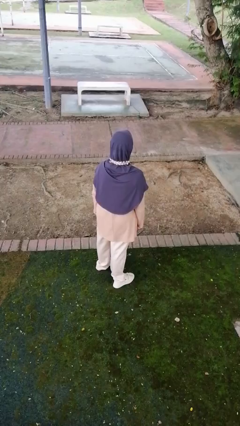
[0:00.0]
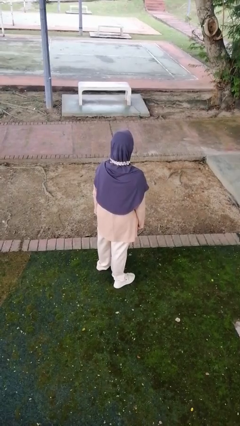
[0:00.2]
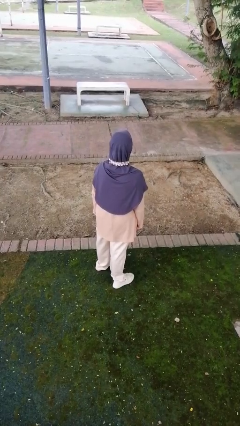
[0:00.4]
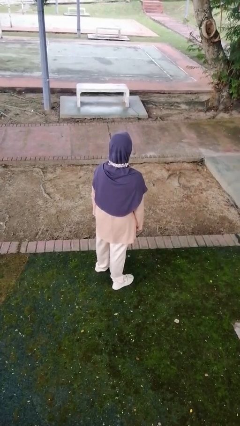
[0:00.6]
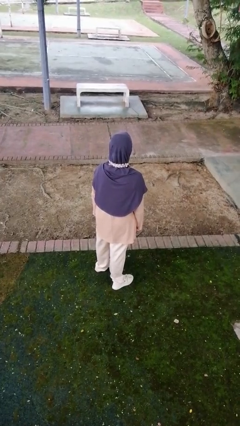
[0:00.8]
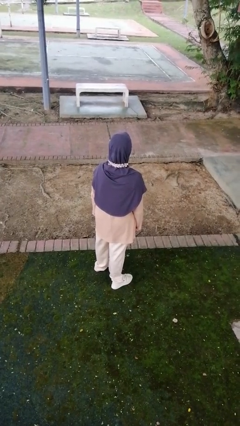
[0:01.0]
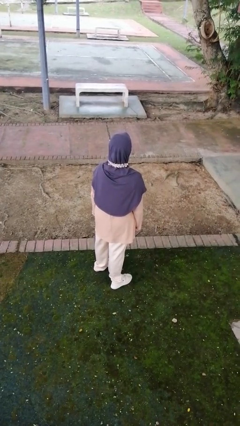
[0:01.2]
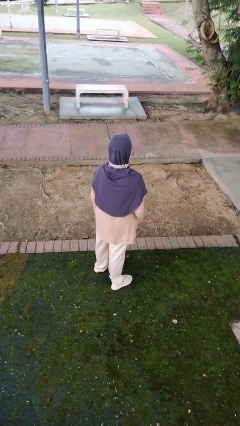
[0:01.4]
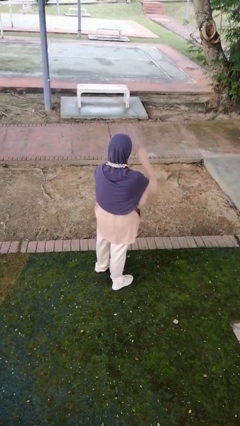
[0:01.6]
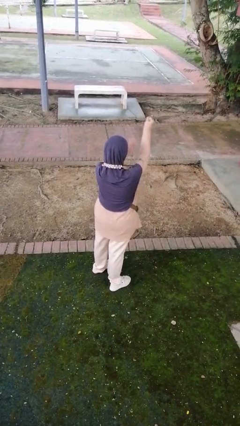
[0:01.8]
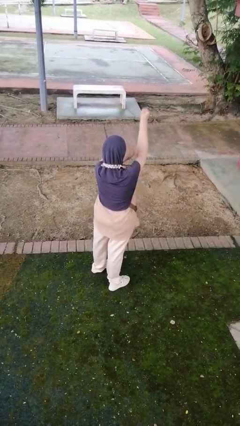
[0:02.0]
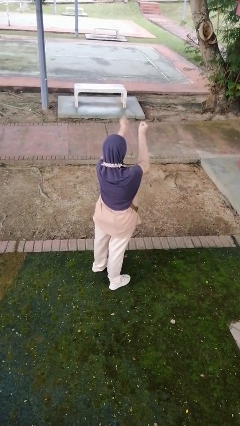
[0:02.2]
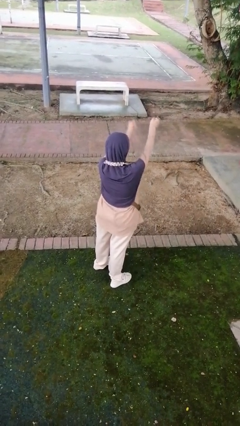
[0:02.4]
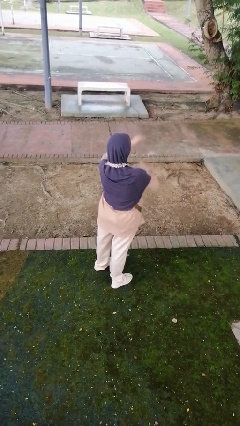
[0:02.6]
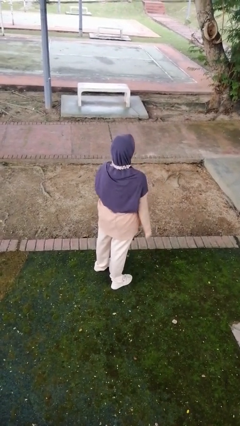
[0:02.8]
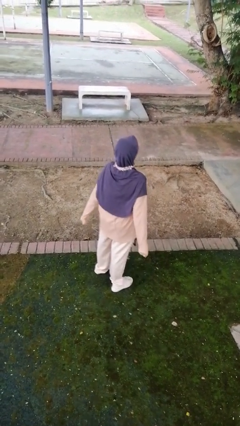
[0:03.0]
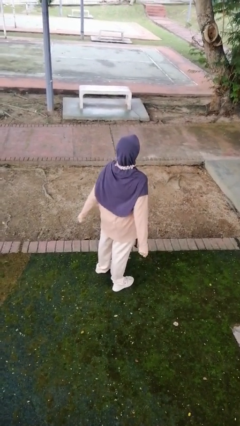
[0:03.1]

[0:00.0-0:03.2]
person punches

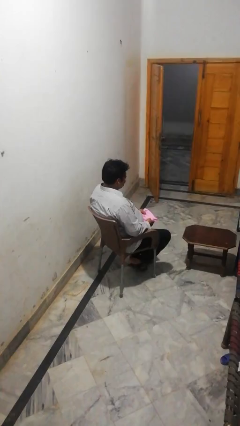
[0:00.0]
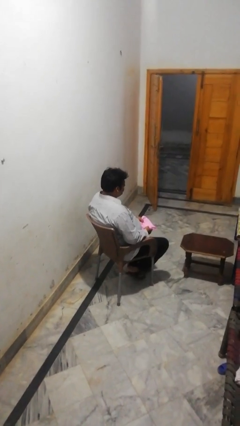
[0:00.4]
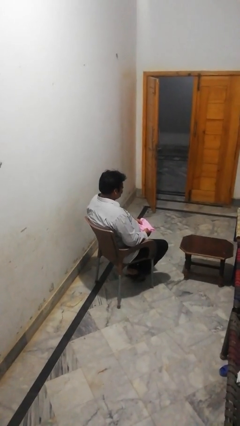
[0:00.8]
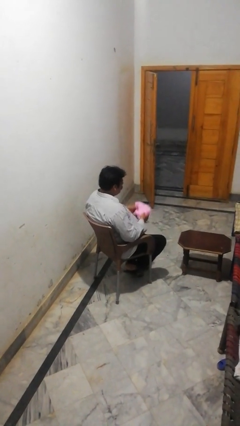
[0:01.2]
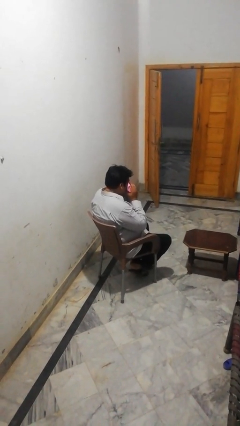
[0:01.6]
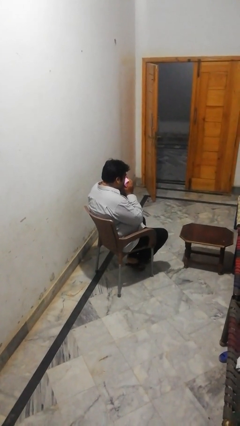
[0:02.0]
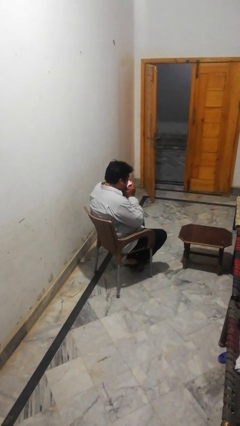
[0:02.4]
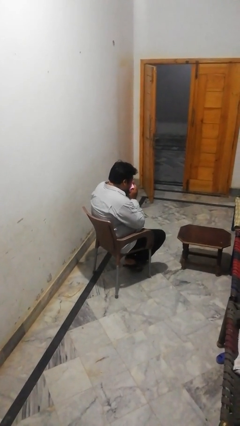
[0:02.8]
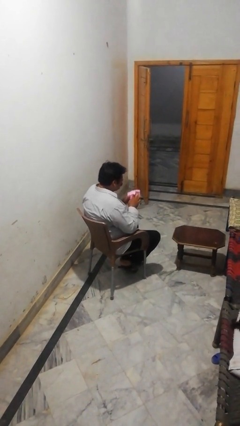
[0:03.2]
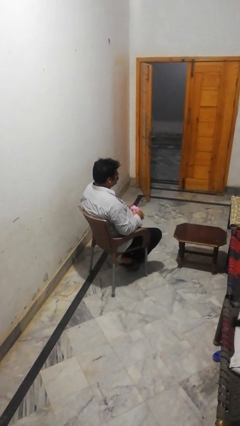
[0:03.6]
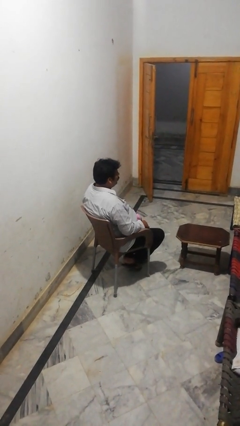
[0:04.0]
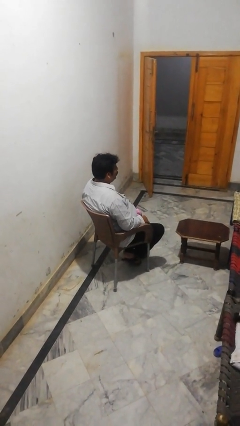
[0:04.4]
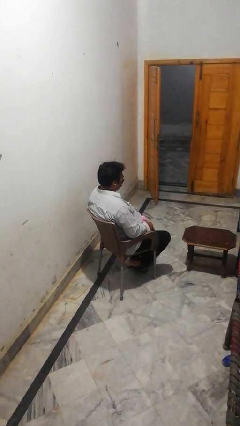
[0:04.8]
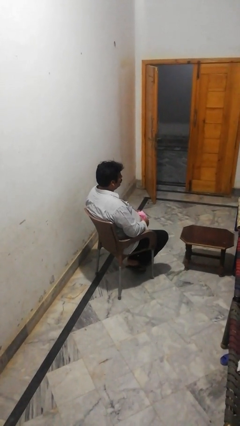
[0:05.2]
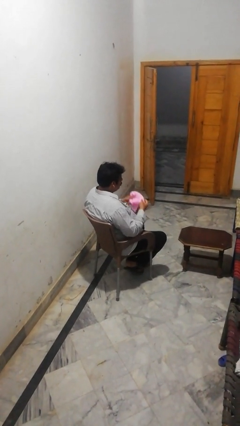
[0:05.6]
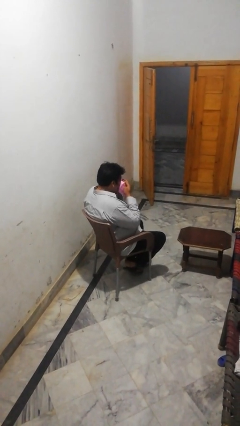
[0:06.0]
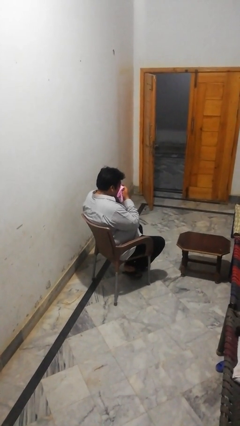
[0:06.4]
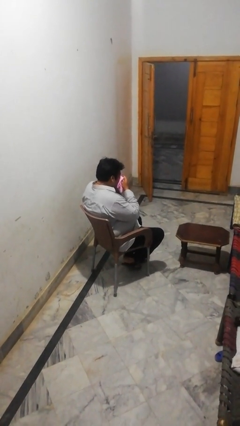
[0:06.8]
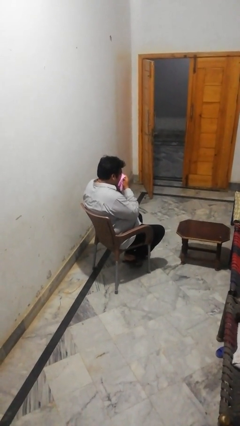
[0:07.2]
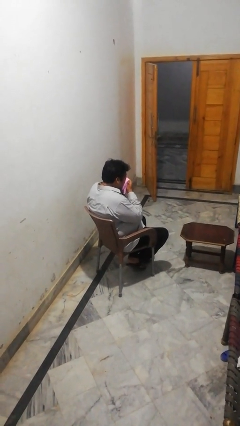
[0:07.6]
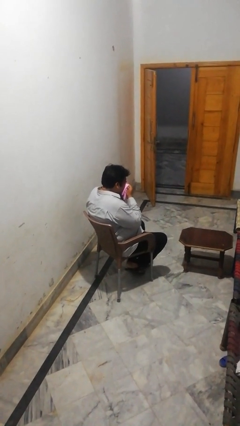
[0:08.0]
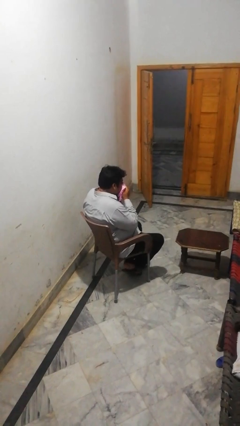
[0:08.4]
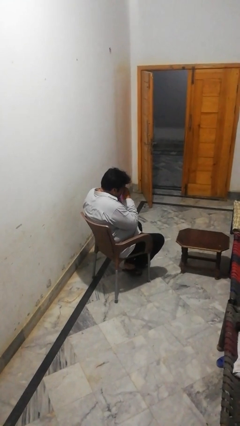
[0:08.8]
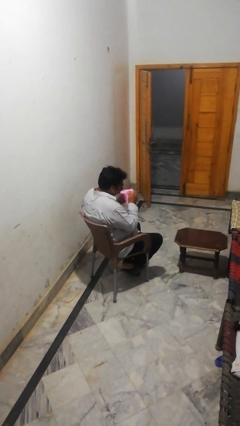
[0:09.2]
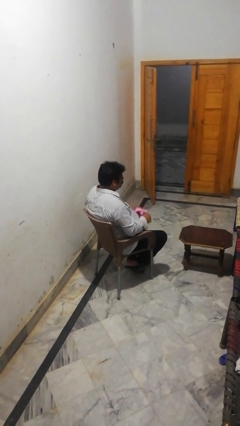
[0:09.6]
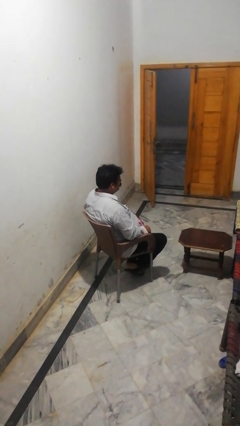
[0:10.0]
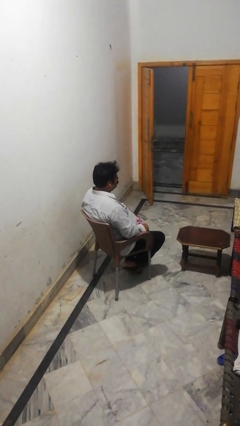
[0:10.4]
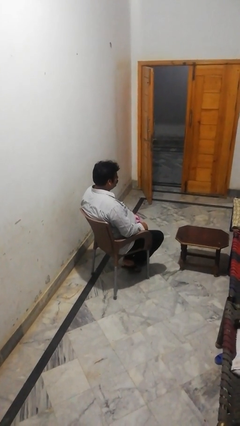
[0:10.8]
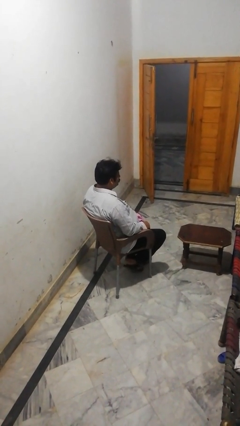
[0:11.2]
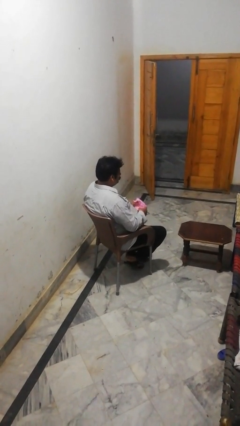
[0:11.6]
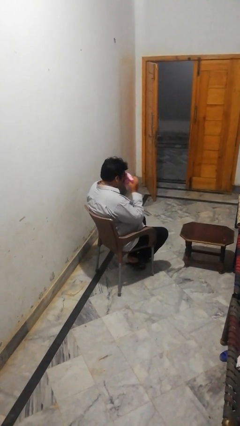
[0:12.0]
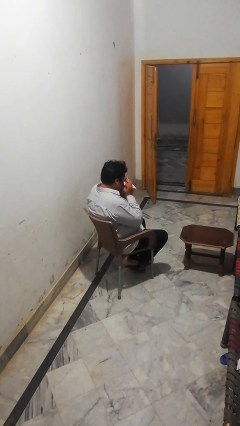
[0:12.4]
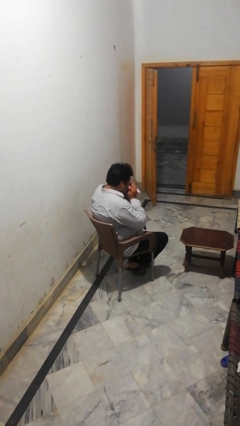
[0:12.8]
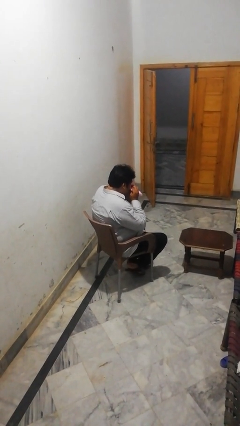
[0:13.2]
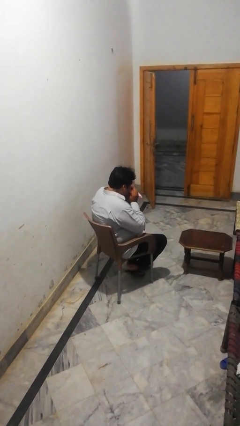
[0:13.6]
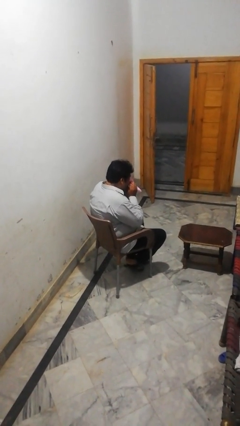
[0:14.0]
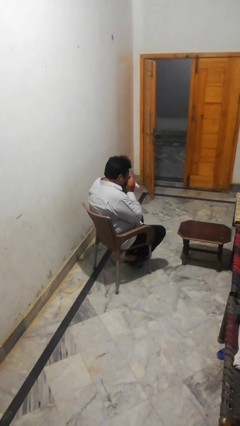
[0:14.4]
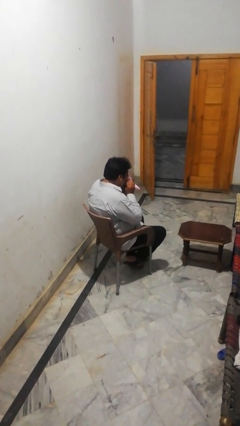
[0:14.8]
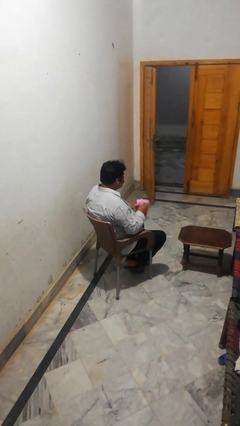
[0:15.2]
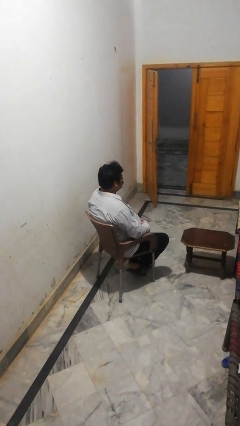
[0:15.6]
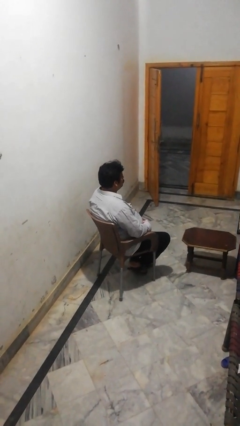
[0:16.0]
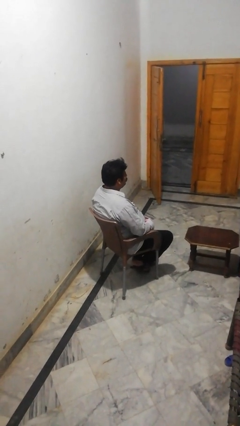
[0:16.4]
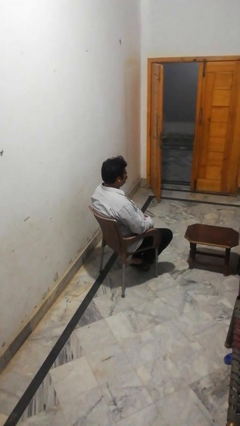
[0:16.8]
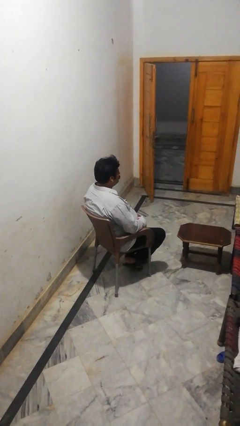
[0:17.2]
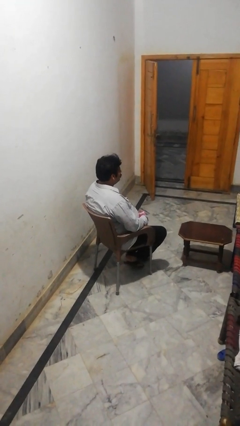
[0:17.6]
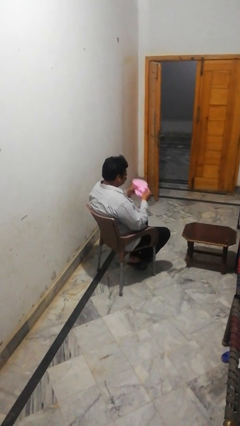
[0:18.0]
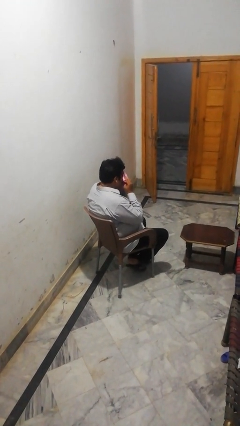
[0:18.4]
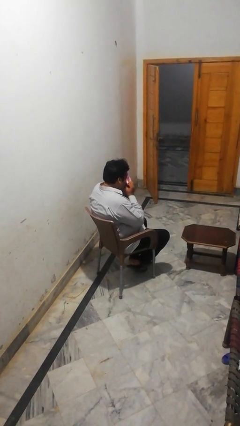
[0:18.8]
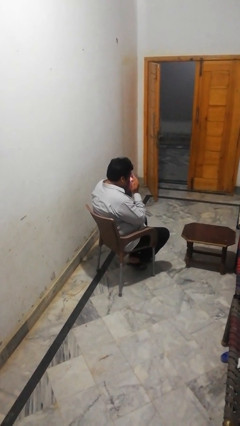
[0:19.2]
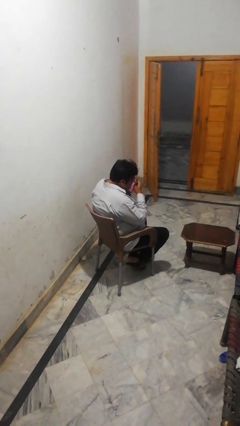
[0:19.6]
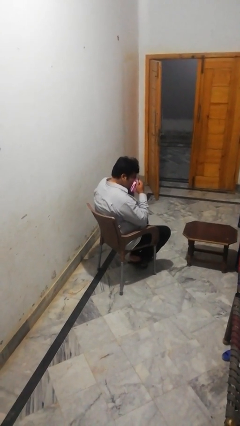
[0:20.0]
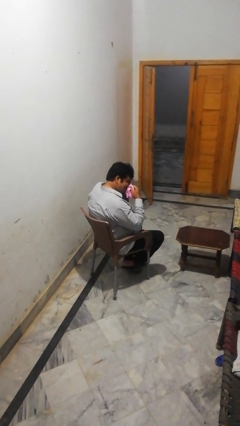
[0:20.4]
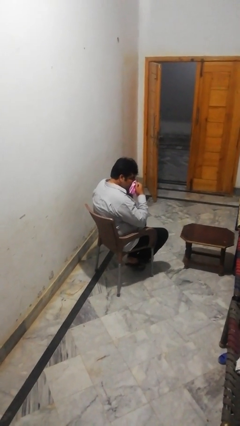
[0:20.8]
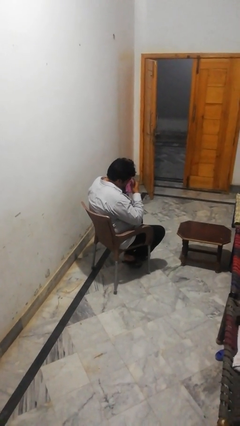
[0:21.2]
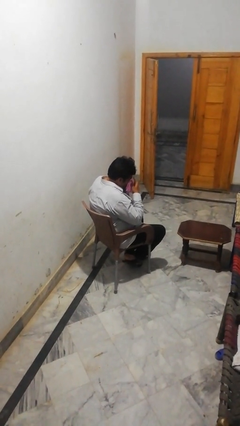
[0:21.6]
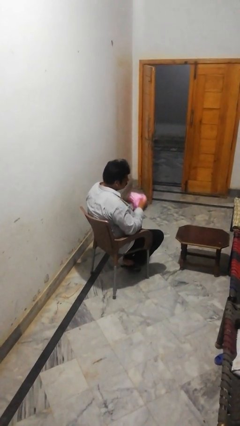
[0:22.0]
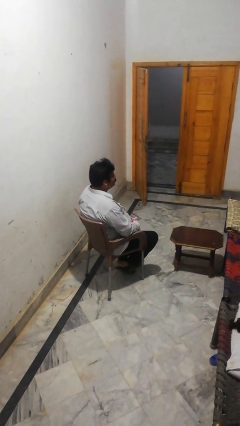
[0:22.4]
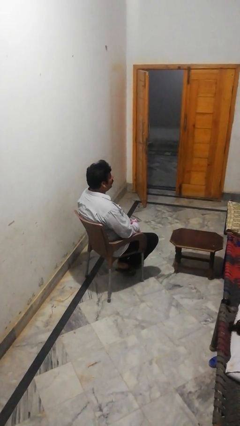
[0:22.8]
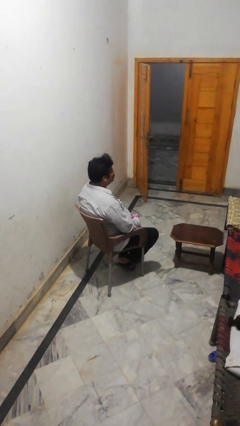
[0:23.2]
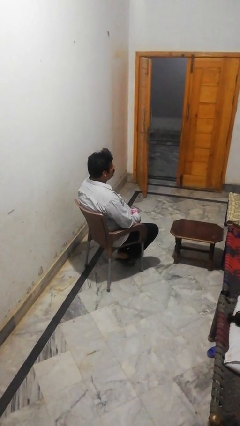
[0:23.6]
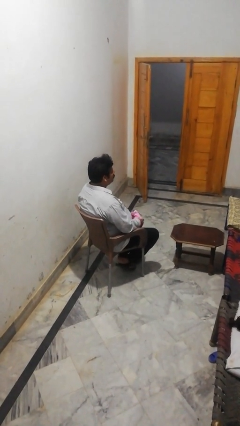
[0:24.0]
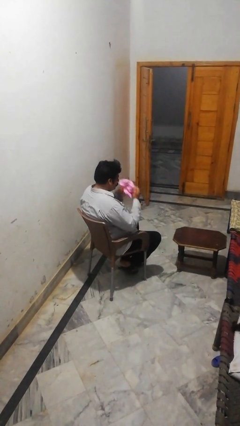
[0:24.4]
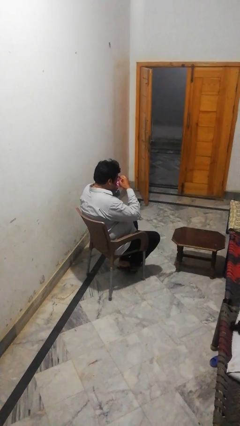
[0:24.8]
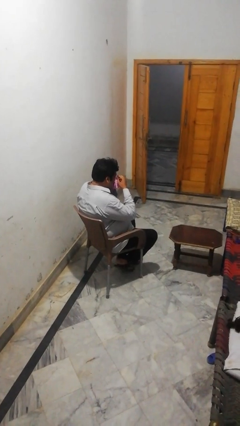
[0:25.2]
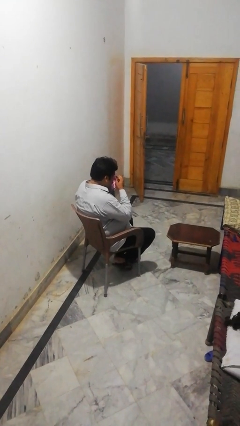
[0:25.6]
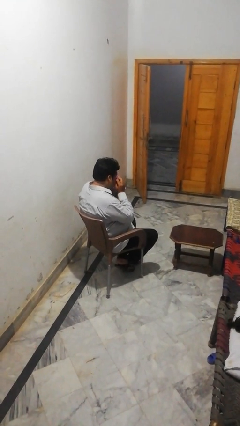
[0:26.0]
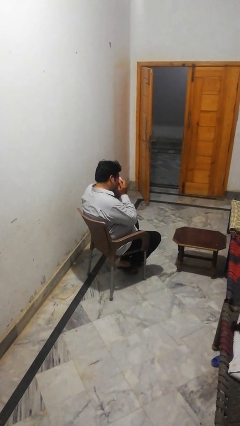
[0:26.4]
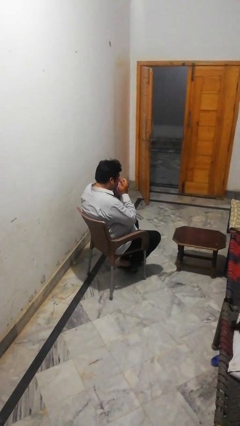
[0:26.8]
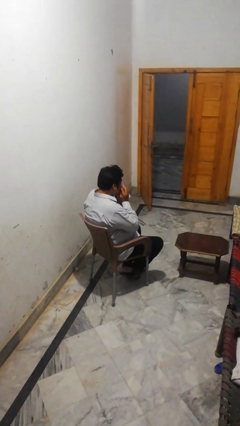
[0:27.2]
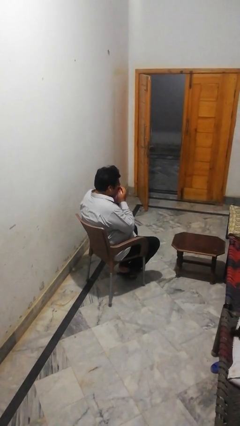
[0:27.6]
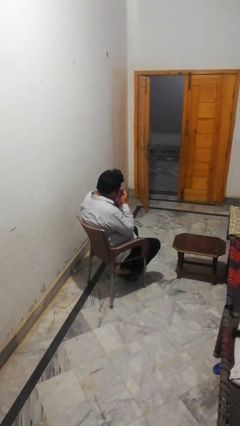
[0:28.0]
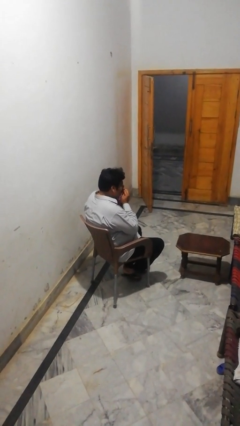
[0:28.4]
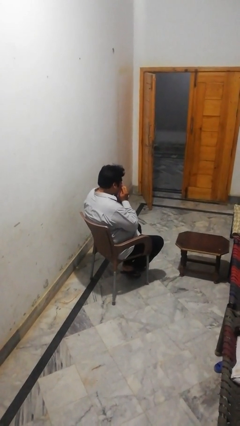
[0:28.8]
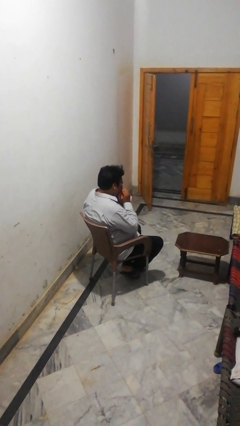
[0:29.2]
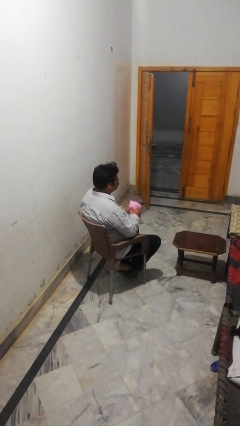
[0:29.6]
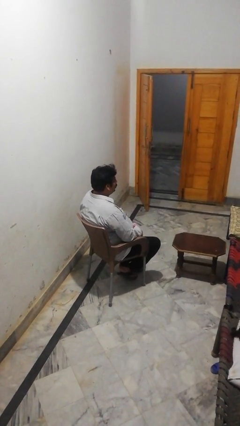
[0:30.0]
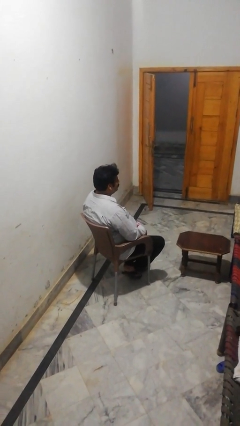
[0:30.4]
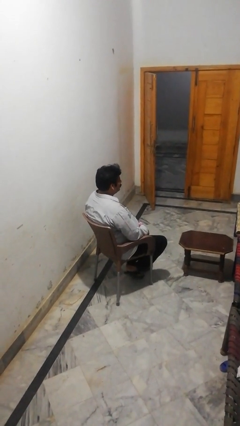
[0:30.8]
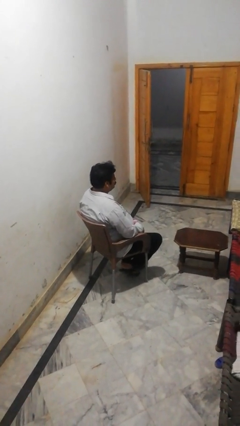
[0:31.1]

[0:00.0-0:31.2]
person blows nose
